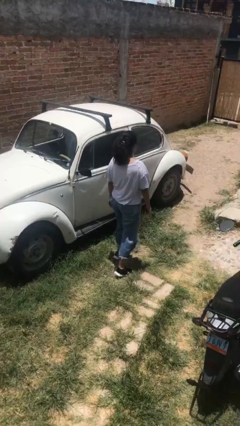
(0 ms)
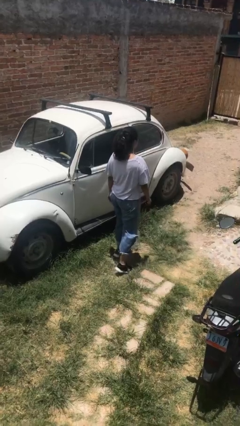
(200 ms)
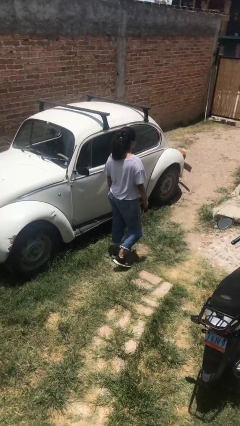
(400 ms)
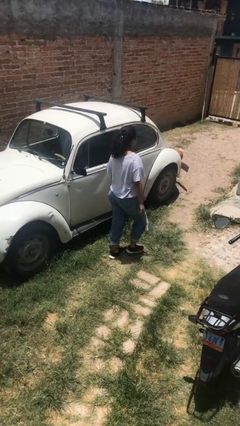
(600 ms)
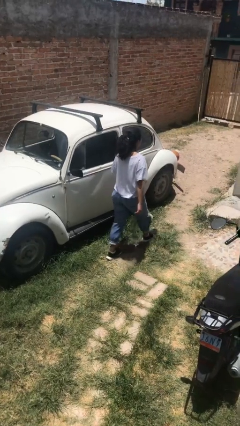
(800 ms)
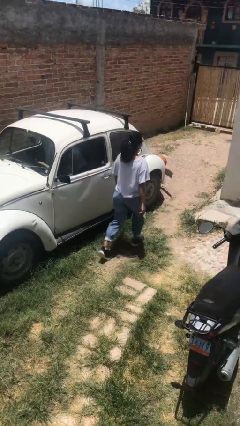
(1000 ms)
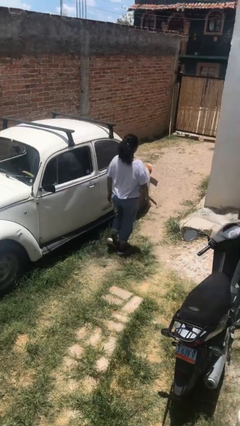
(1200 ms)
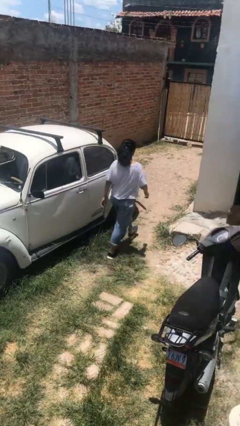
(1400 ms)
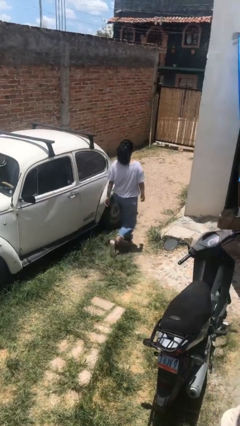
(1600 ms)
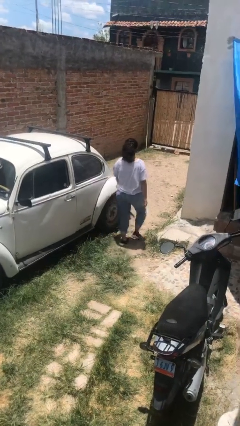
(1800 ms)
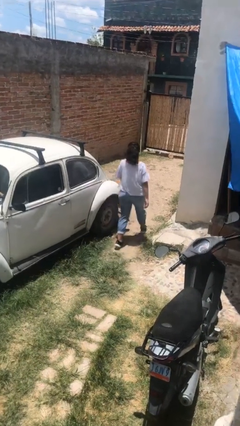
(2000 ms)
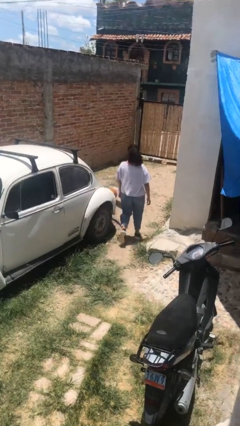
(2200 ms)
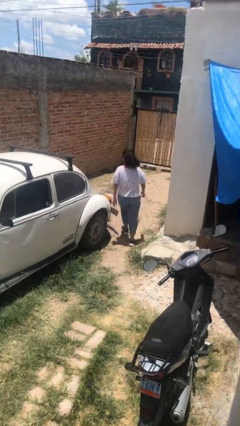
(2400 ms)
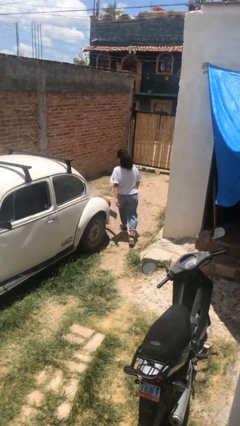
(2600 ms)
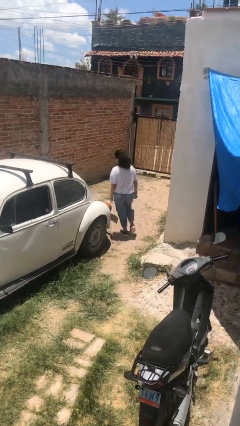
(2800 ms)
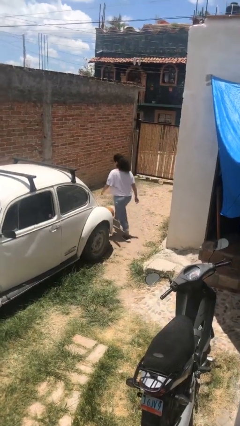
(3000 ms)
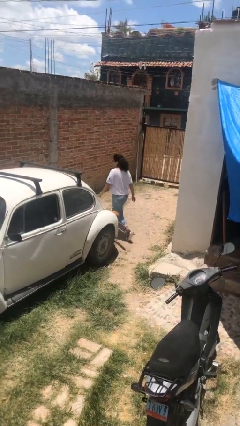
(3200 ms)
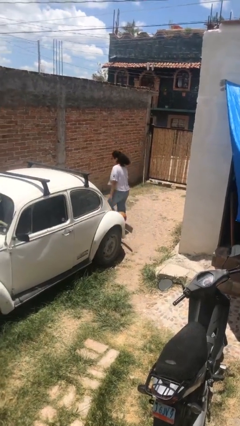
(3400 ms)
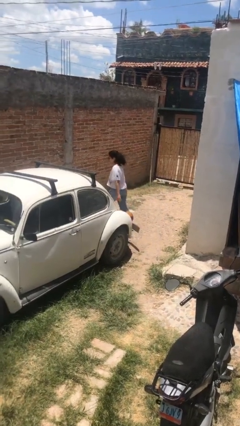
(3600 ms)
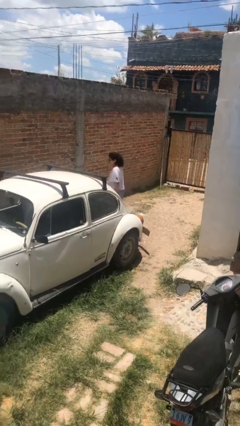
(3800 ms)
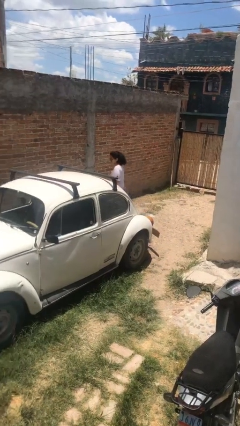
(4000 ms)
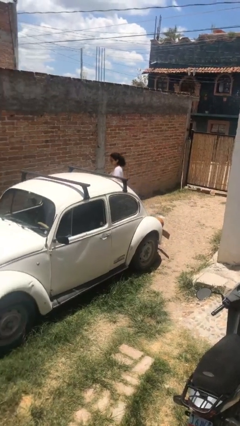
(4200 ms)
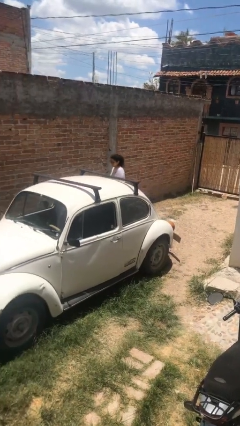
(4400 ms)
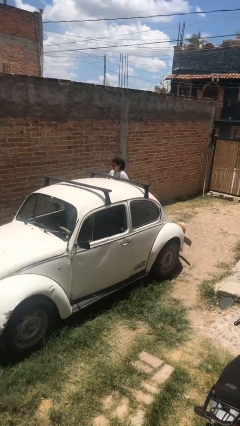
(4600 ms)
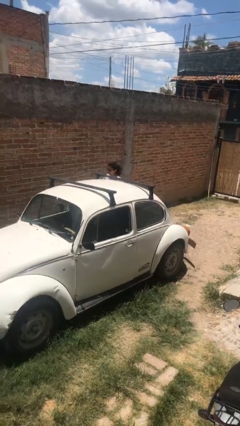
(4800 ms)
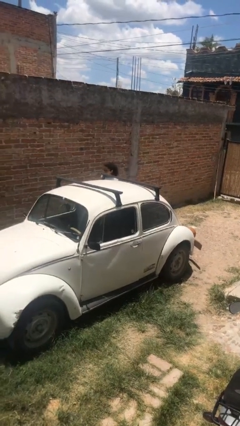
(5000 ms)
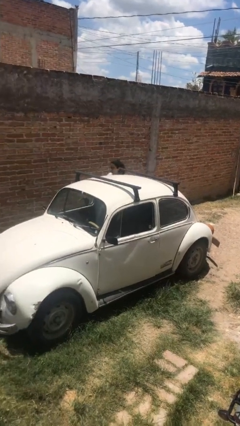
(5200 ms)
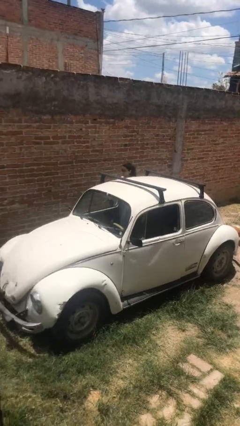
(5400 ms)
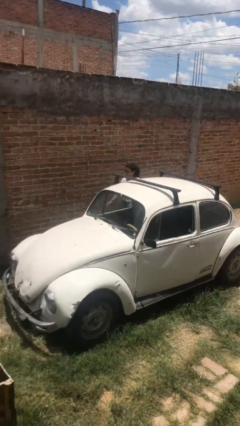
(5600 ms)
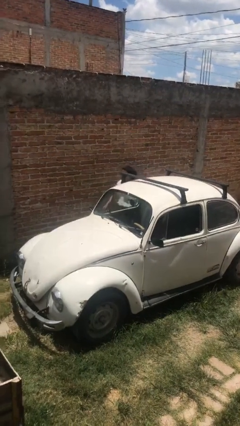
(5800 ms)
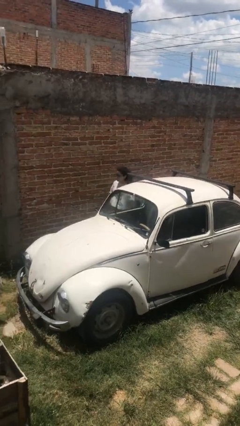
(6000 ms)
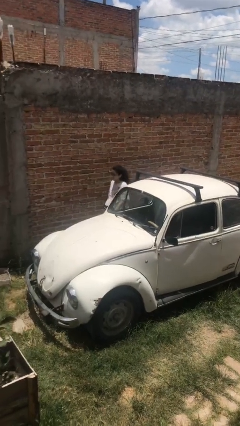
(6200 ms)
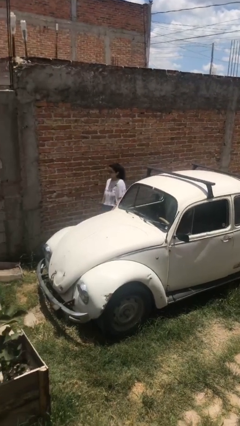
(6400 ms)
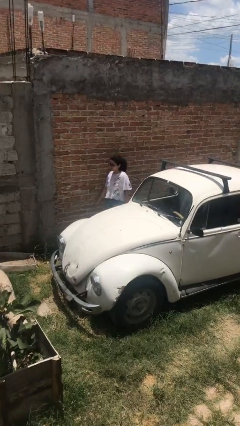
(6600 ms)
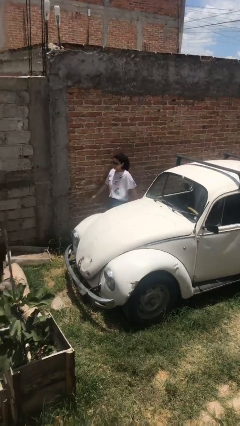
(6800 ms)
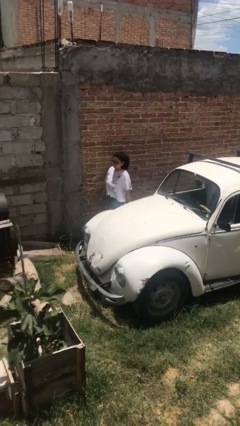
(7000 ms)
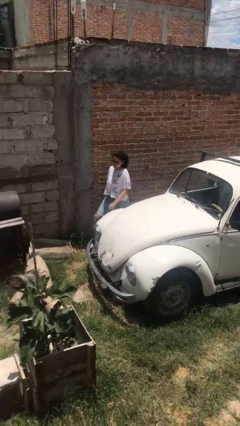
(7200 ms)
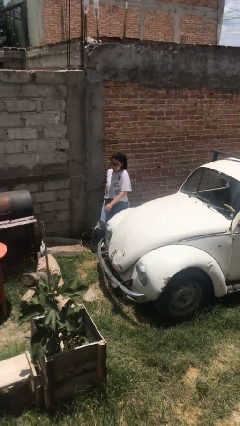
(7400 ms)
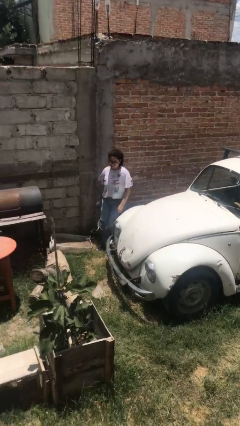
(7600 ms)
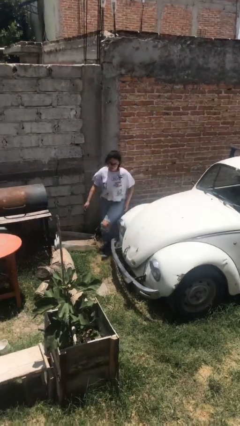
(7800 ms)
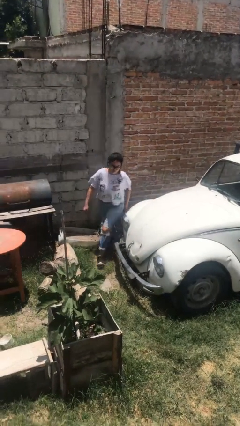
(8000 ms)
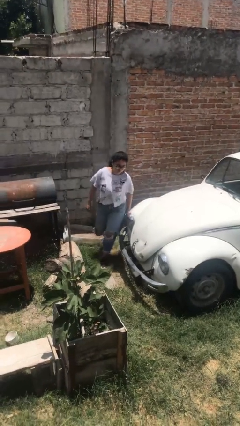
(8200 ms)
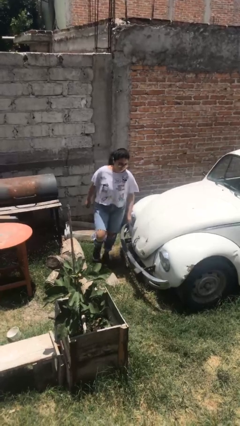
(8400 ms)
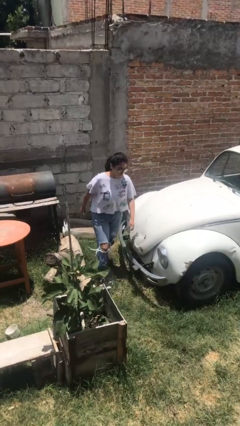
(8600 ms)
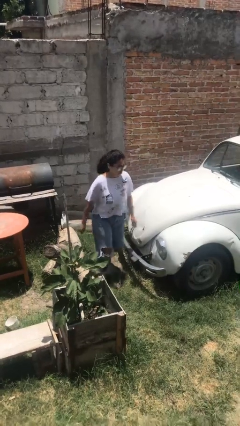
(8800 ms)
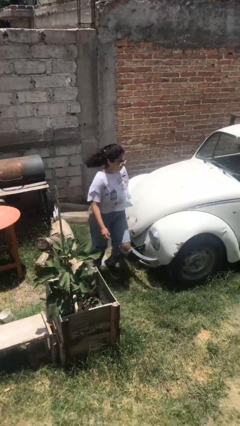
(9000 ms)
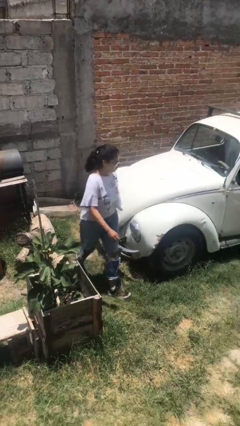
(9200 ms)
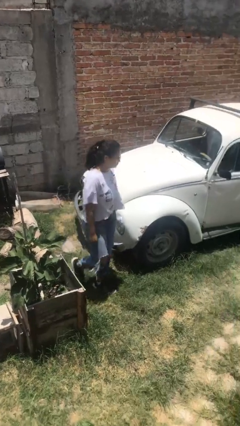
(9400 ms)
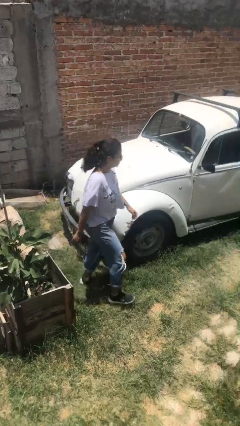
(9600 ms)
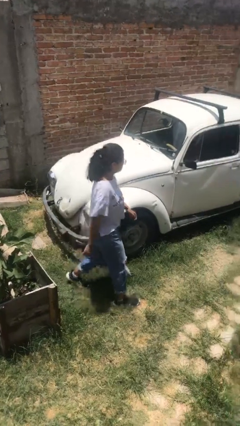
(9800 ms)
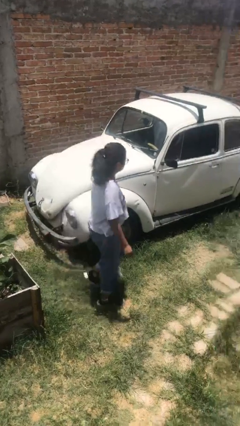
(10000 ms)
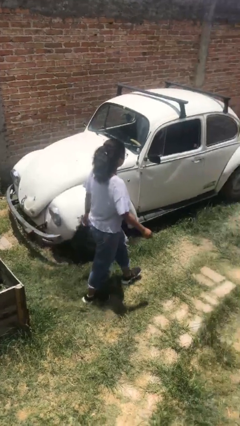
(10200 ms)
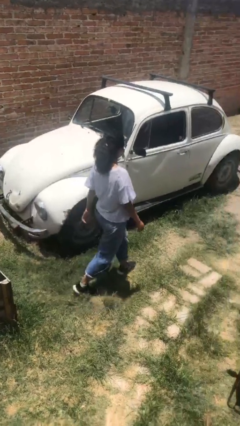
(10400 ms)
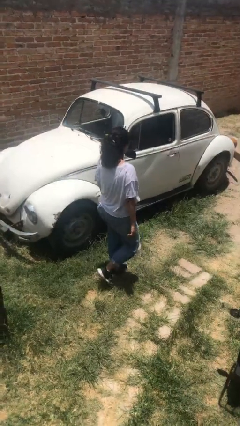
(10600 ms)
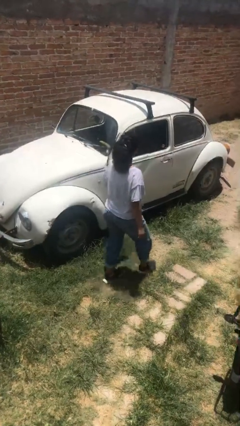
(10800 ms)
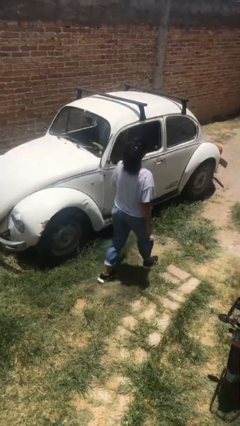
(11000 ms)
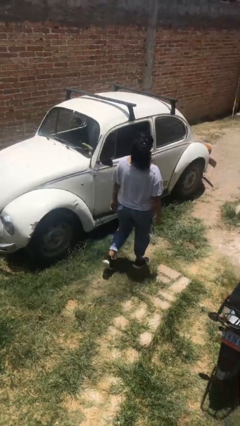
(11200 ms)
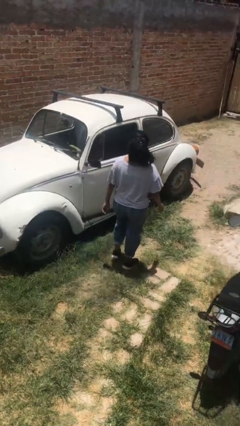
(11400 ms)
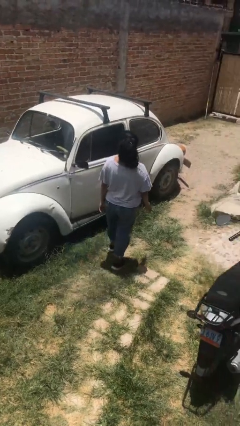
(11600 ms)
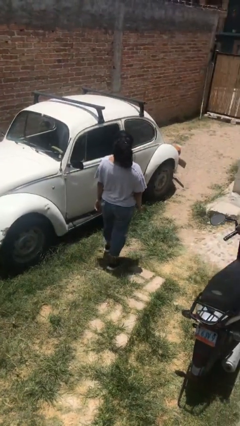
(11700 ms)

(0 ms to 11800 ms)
person walks around car

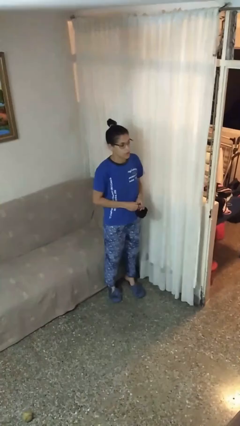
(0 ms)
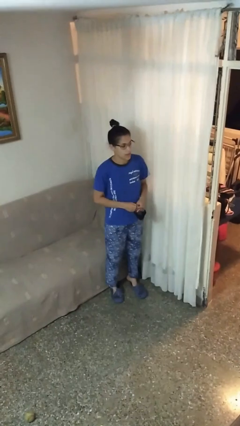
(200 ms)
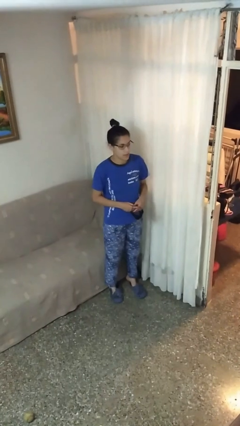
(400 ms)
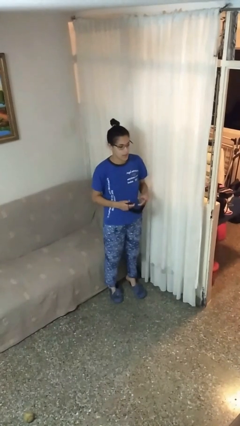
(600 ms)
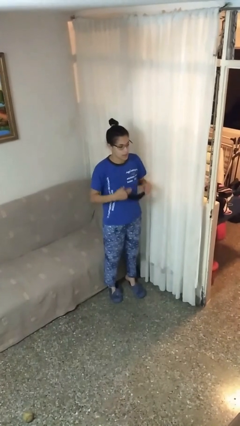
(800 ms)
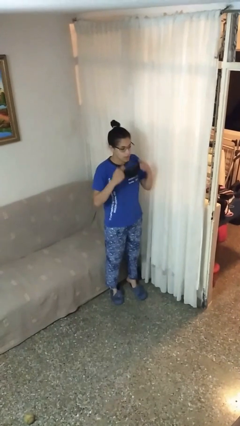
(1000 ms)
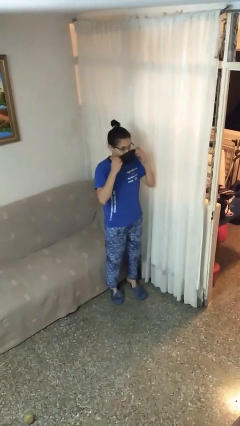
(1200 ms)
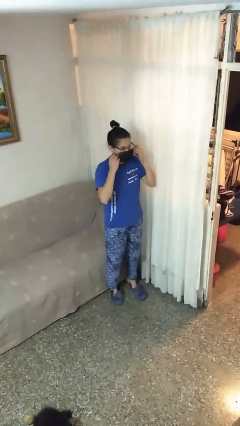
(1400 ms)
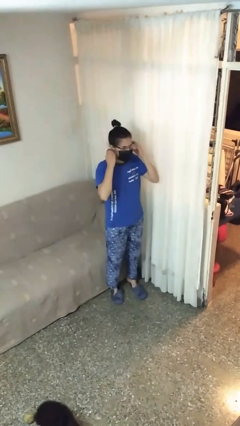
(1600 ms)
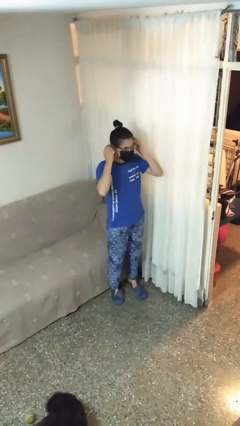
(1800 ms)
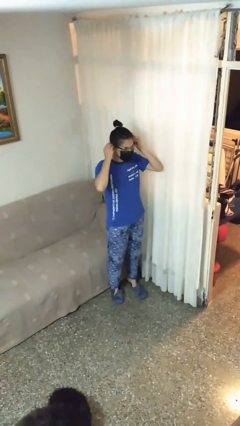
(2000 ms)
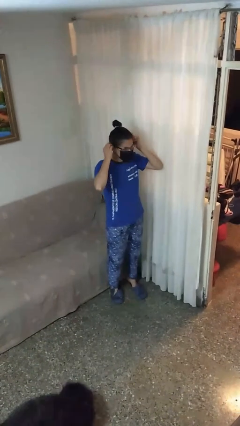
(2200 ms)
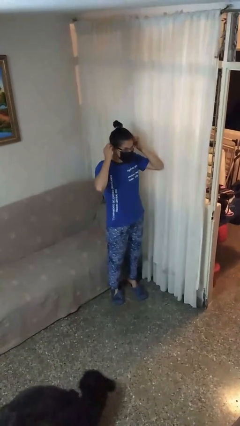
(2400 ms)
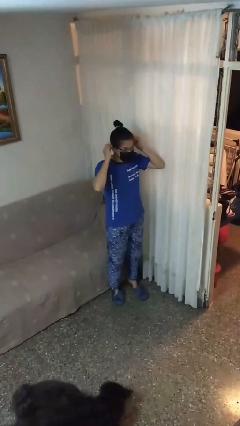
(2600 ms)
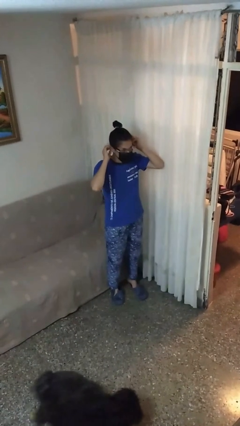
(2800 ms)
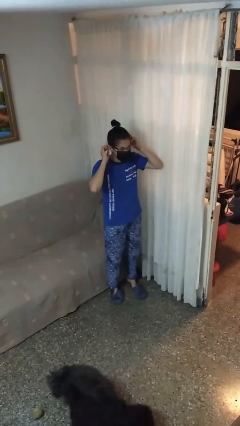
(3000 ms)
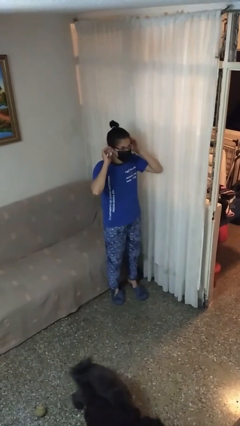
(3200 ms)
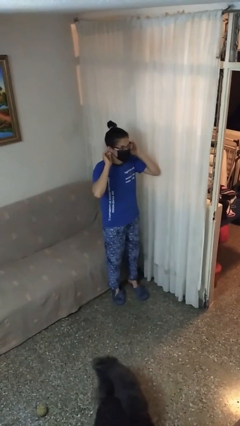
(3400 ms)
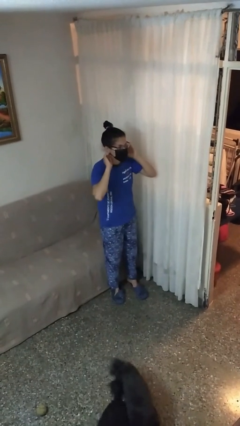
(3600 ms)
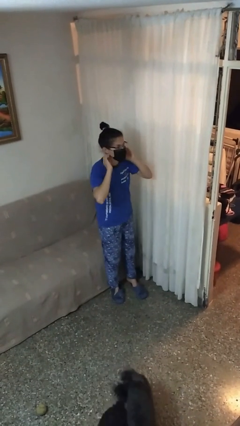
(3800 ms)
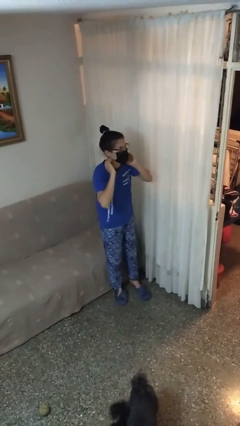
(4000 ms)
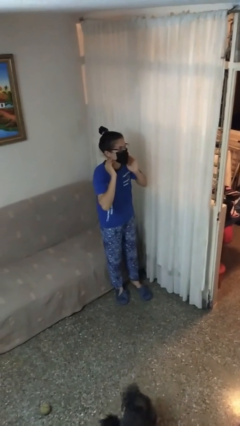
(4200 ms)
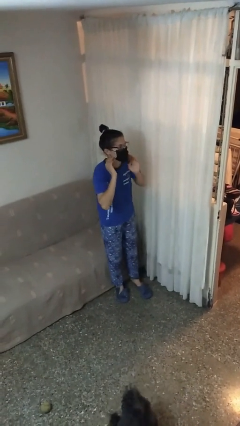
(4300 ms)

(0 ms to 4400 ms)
person puts on facemask

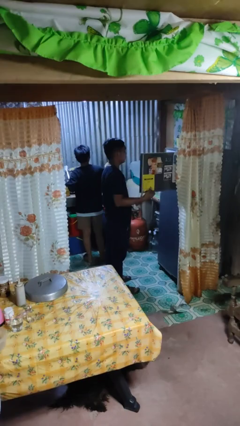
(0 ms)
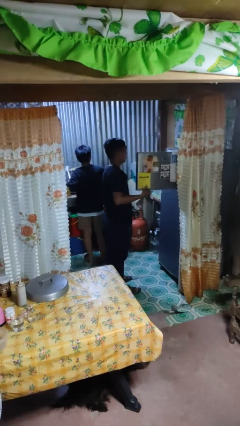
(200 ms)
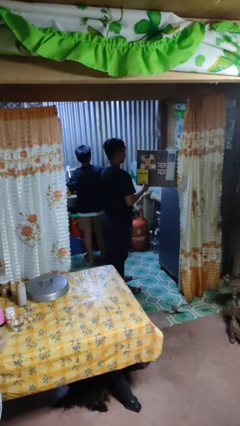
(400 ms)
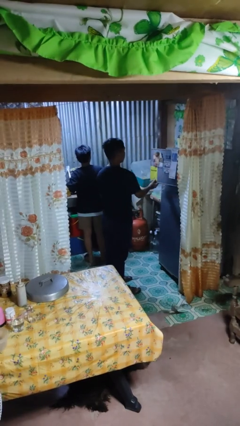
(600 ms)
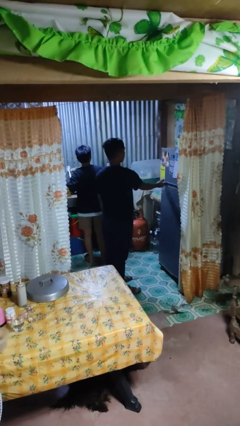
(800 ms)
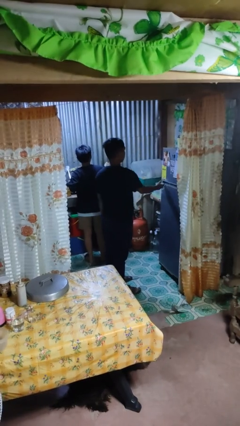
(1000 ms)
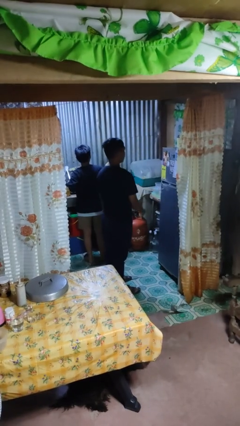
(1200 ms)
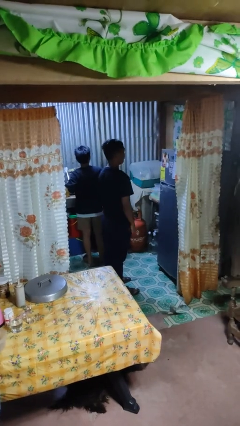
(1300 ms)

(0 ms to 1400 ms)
person closes refrigerator

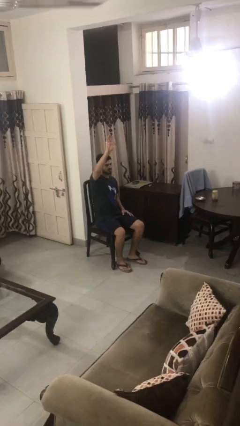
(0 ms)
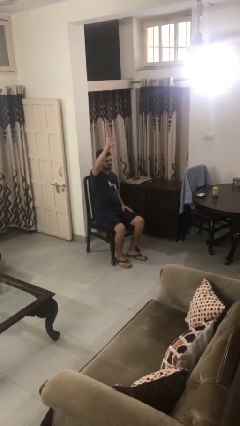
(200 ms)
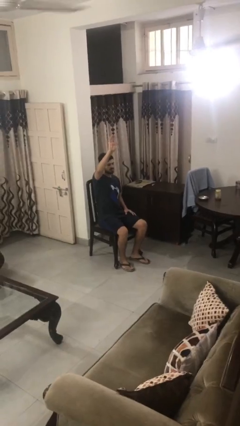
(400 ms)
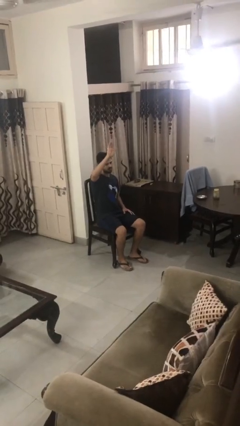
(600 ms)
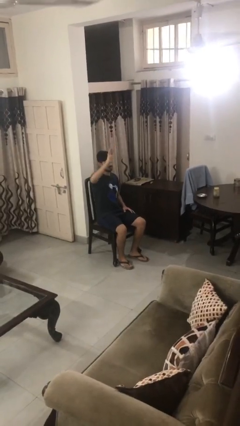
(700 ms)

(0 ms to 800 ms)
person gestures lower hand
